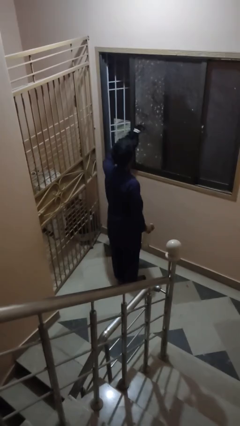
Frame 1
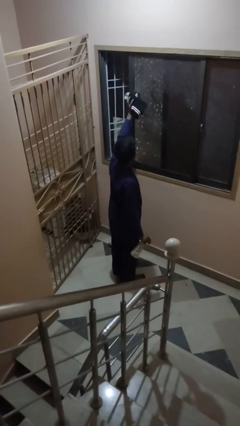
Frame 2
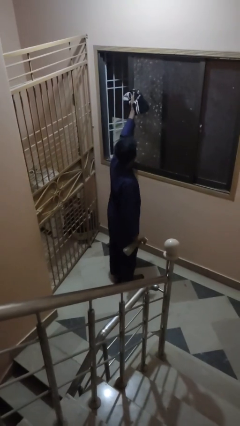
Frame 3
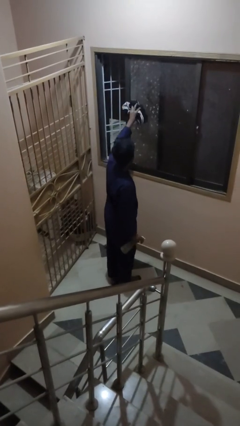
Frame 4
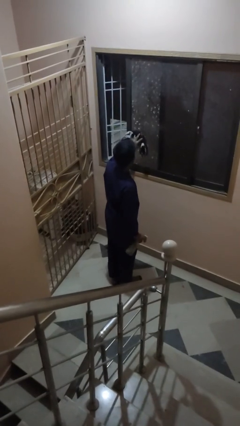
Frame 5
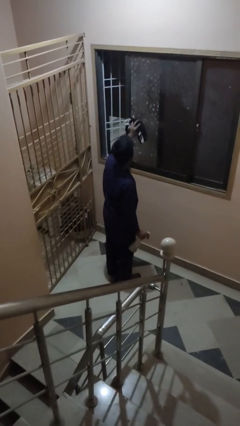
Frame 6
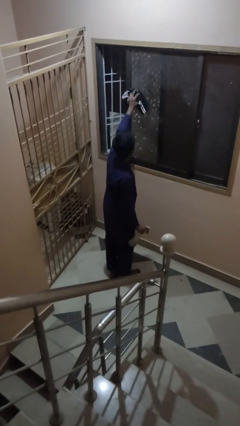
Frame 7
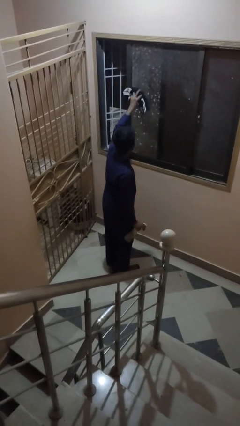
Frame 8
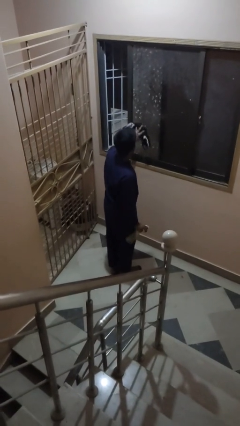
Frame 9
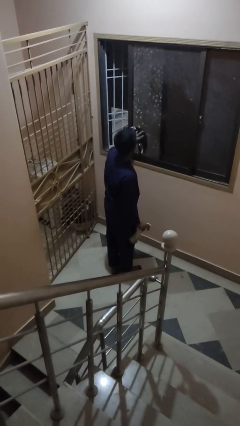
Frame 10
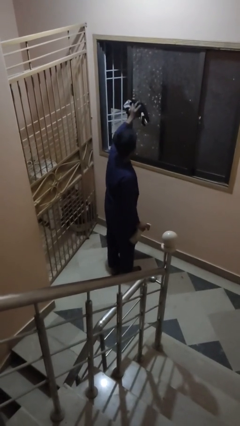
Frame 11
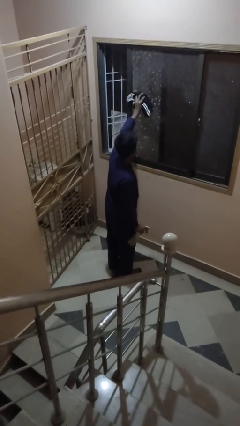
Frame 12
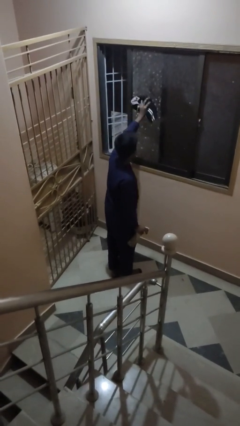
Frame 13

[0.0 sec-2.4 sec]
person washes window

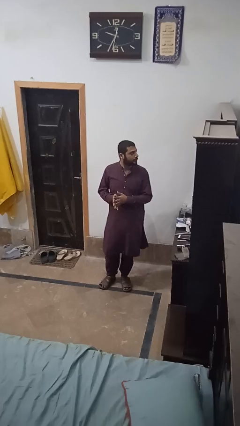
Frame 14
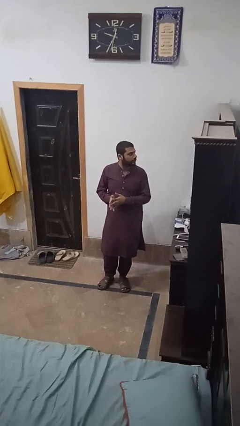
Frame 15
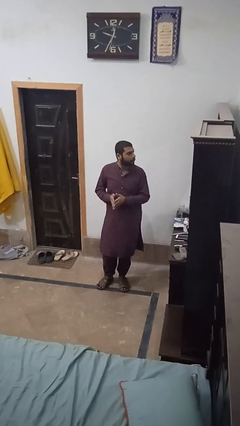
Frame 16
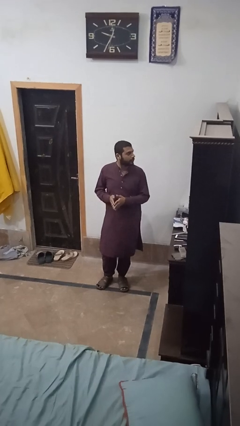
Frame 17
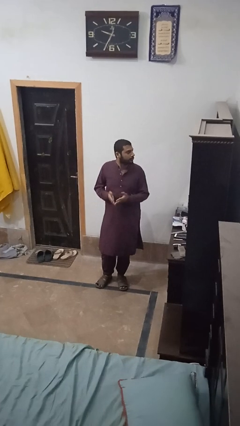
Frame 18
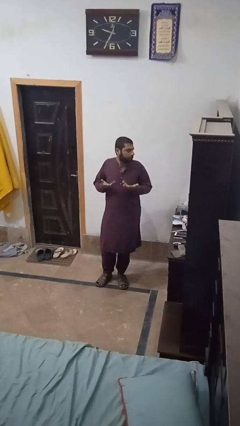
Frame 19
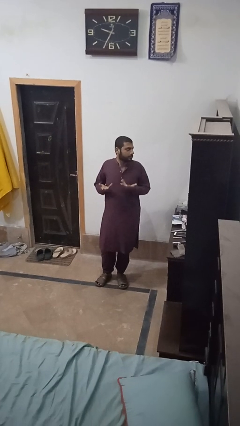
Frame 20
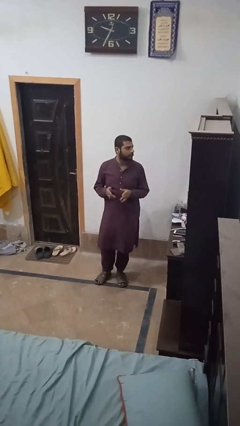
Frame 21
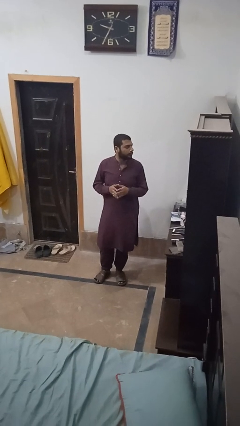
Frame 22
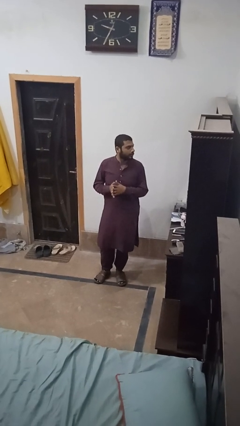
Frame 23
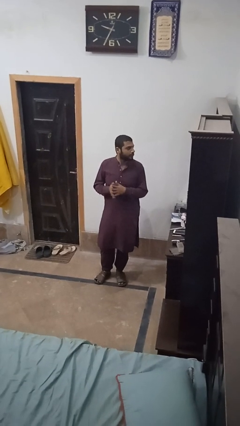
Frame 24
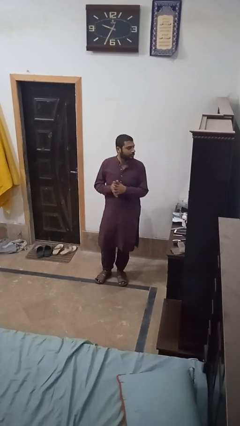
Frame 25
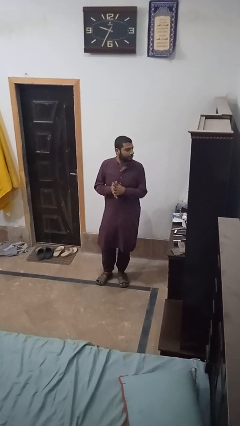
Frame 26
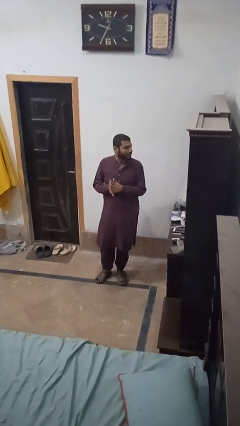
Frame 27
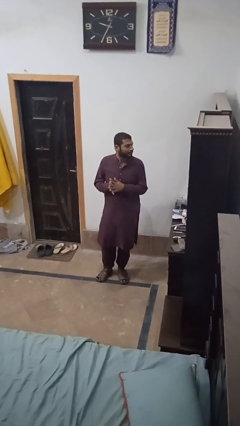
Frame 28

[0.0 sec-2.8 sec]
person shrugs

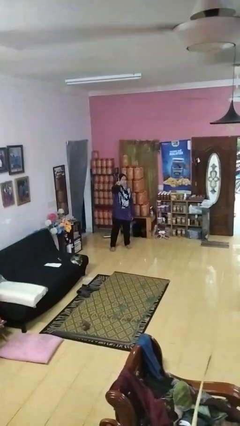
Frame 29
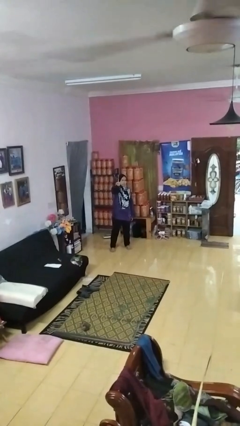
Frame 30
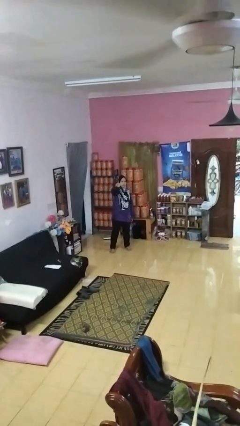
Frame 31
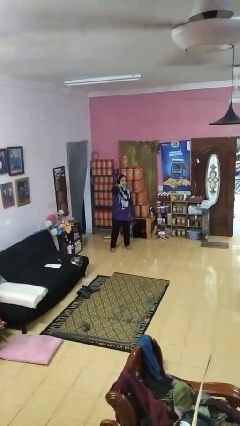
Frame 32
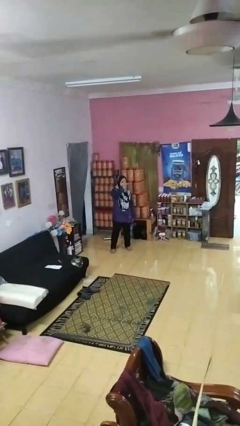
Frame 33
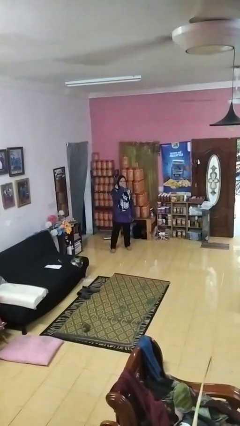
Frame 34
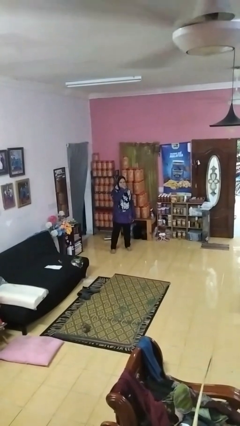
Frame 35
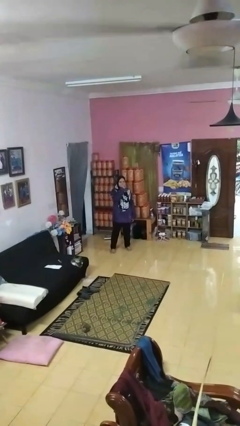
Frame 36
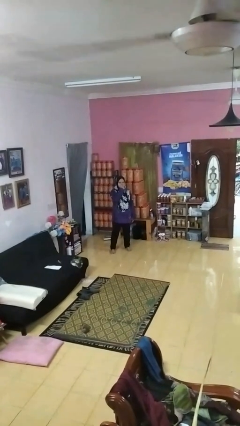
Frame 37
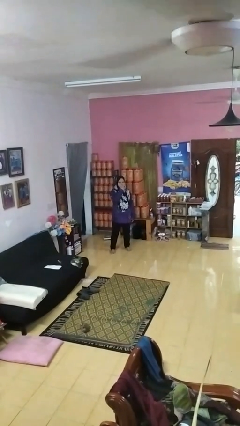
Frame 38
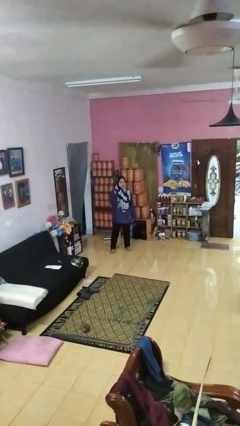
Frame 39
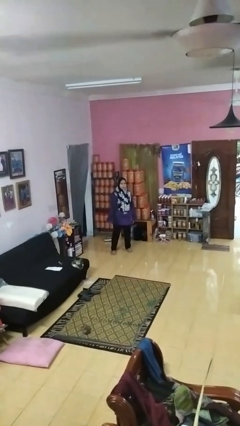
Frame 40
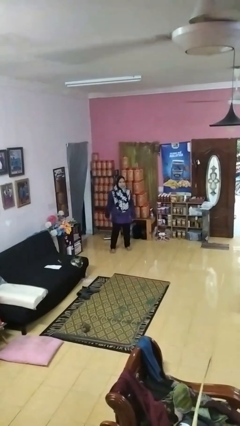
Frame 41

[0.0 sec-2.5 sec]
person gestures watch closely

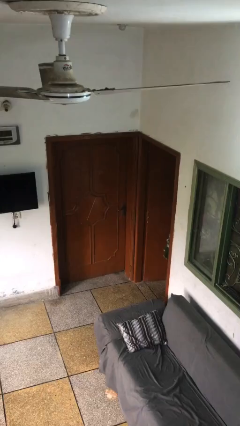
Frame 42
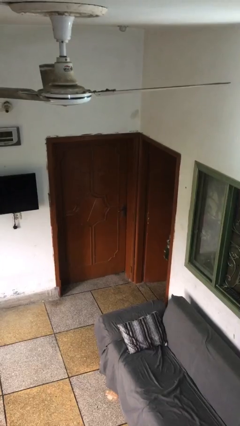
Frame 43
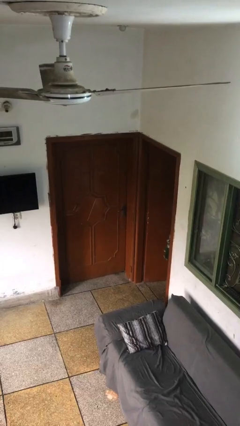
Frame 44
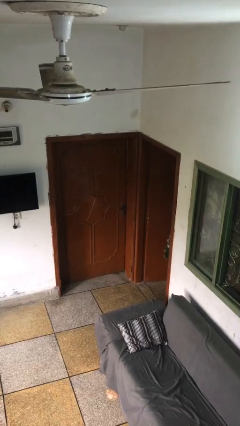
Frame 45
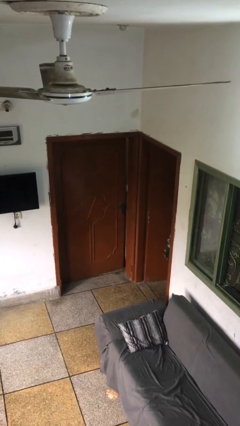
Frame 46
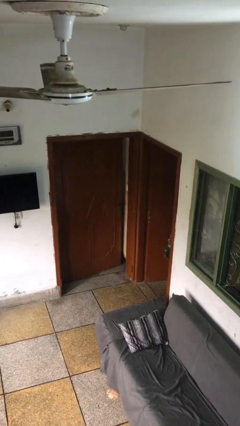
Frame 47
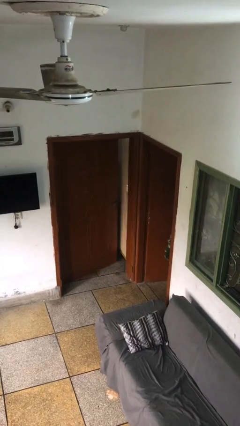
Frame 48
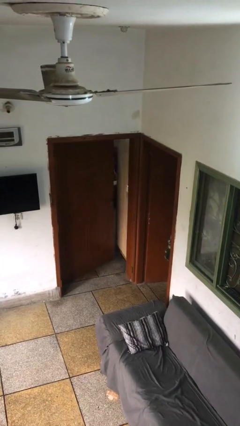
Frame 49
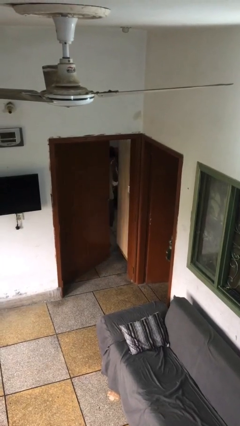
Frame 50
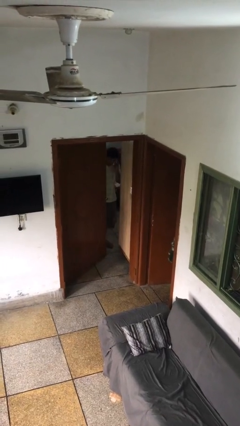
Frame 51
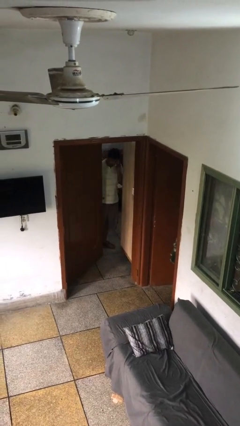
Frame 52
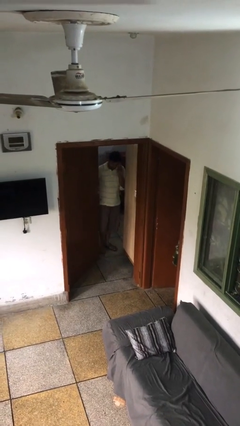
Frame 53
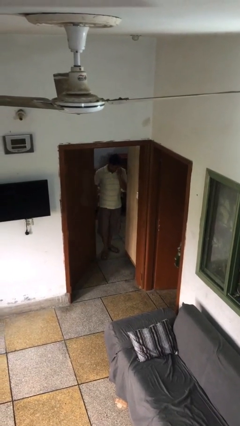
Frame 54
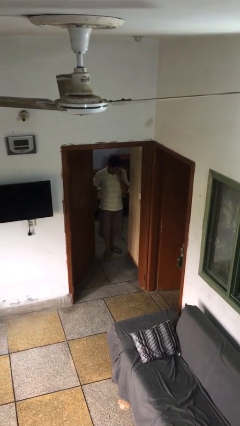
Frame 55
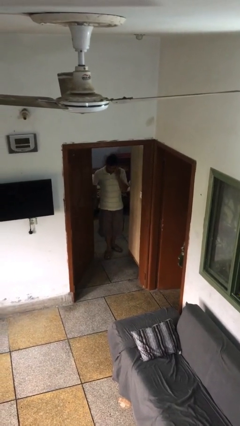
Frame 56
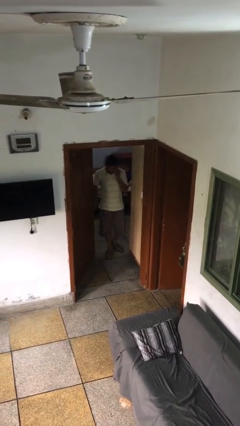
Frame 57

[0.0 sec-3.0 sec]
person opens facility door

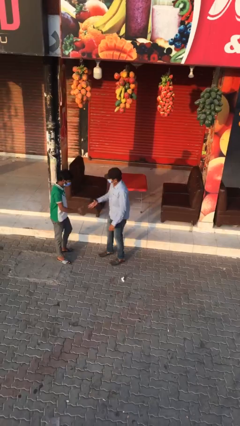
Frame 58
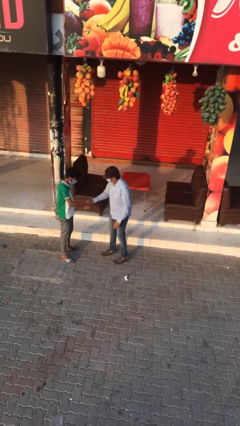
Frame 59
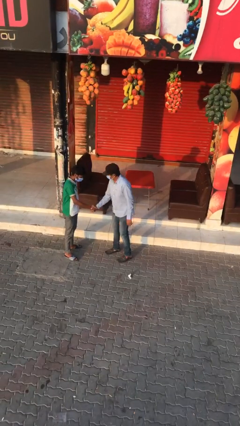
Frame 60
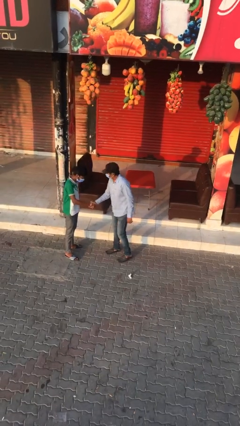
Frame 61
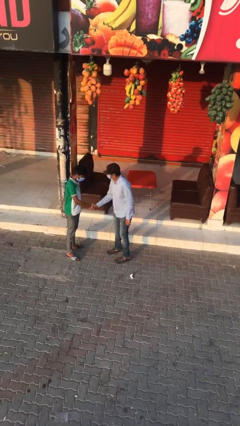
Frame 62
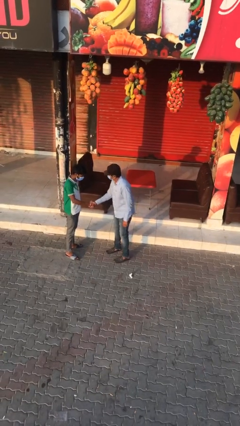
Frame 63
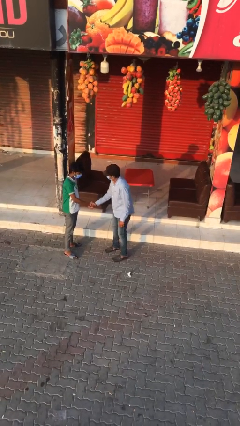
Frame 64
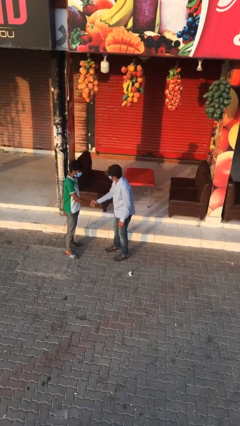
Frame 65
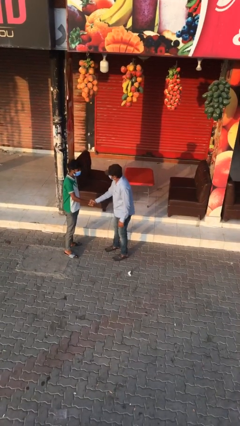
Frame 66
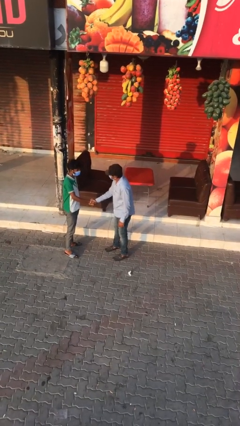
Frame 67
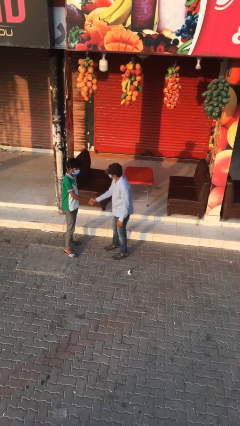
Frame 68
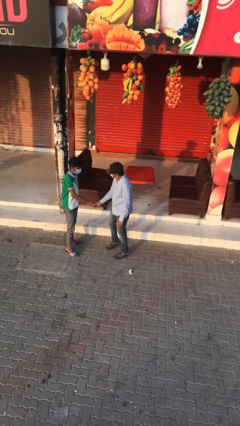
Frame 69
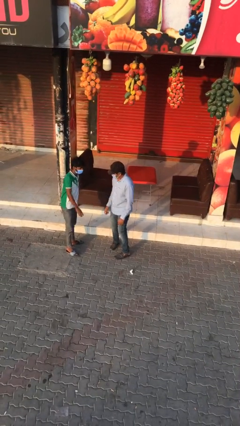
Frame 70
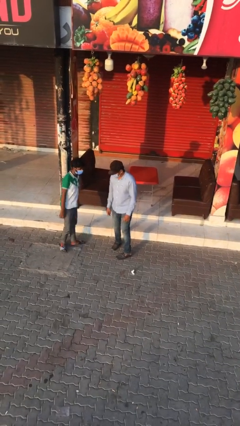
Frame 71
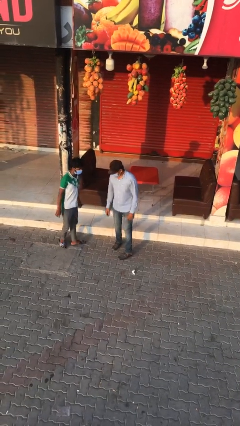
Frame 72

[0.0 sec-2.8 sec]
person shakes hand

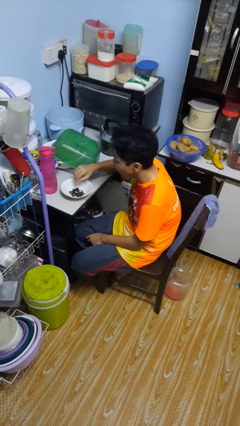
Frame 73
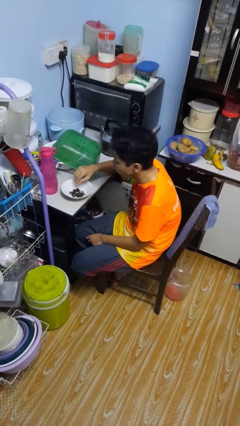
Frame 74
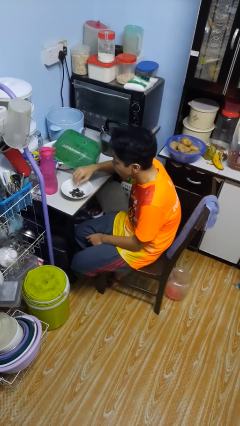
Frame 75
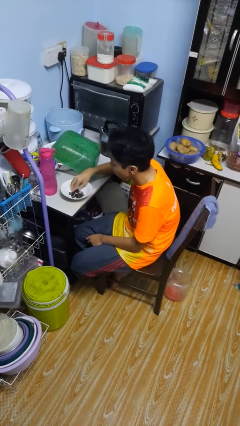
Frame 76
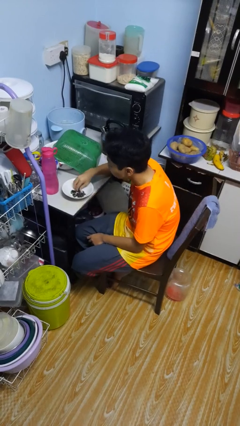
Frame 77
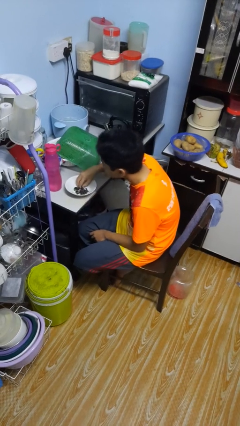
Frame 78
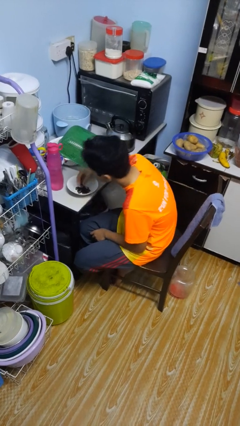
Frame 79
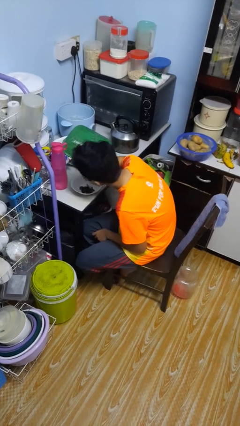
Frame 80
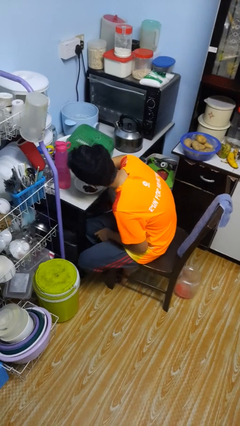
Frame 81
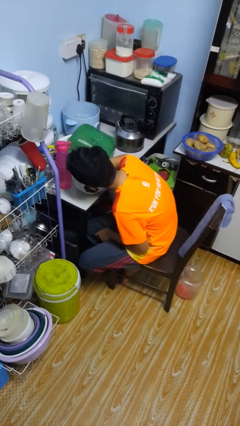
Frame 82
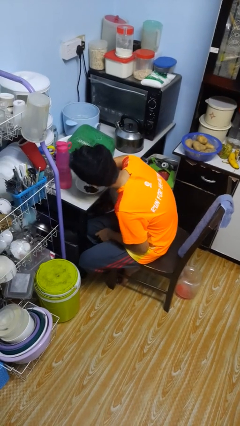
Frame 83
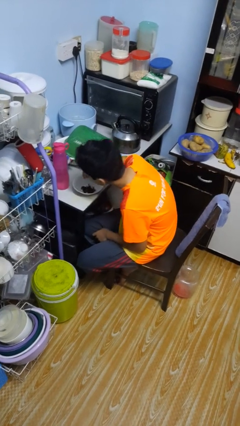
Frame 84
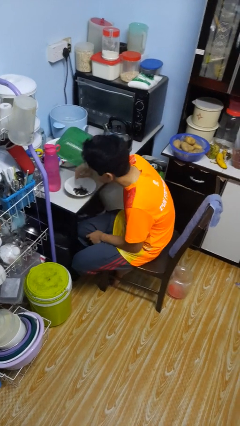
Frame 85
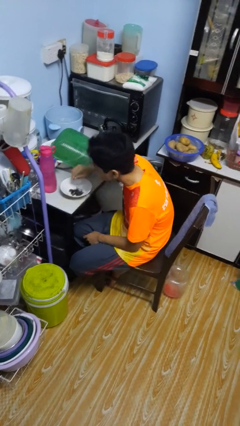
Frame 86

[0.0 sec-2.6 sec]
person eats with hands

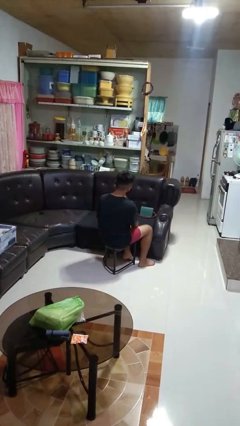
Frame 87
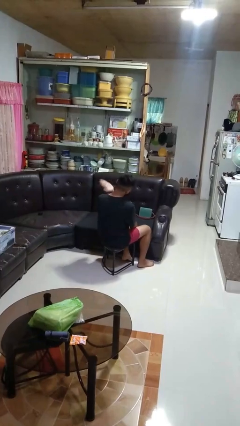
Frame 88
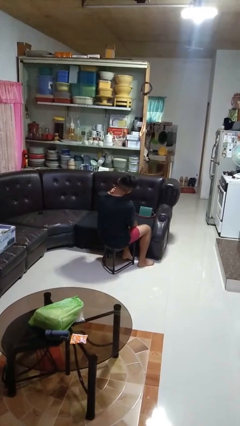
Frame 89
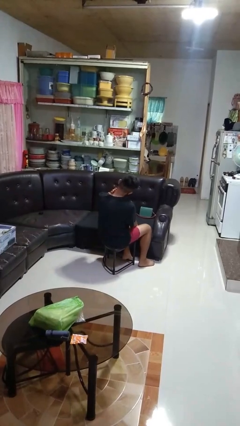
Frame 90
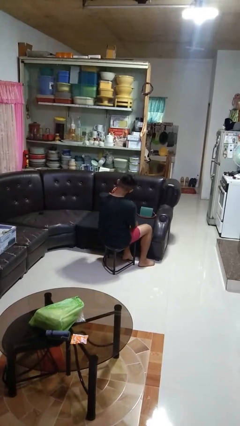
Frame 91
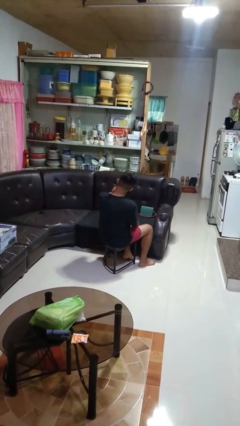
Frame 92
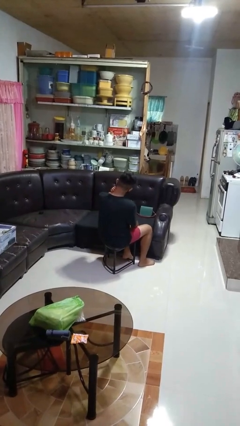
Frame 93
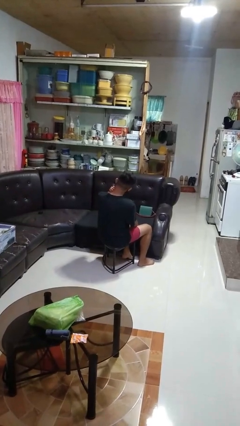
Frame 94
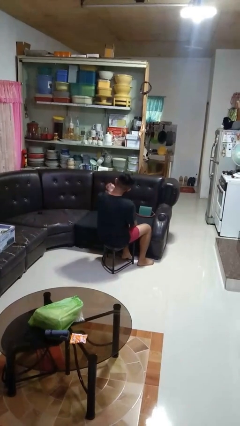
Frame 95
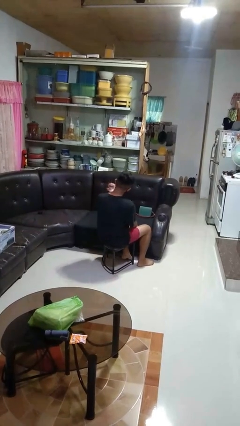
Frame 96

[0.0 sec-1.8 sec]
person swats bug
